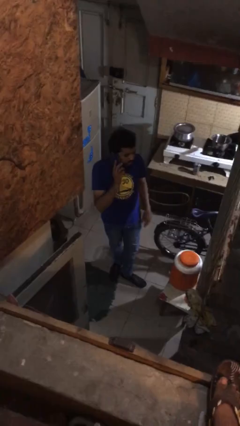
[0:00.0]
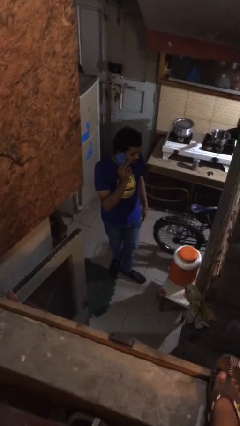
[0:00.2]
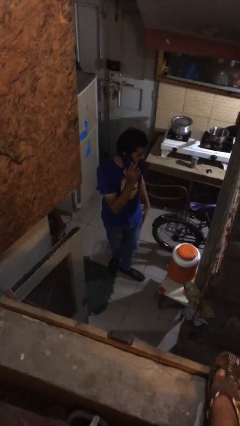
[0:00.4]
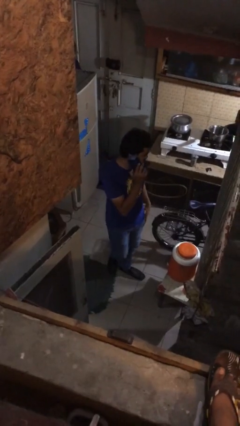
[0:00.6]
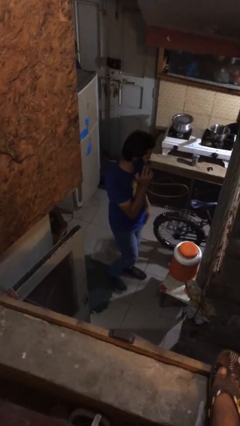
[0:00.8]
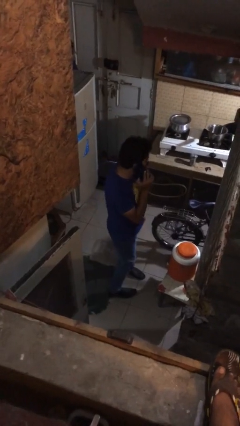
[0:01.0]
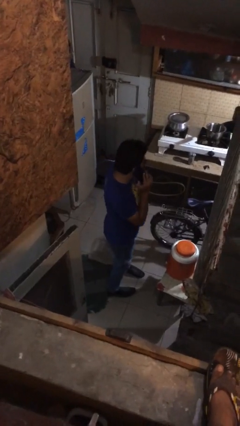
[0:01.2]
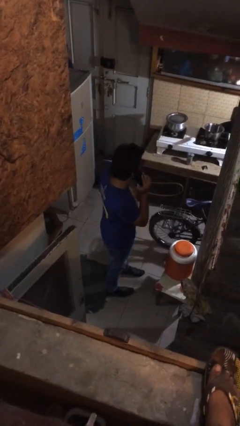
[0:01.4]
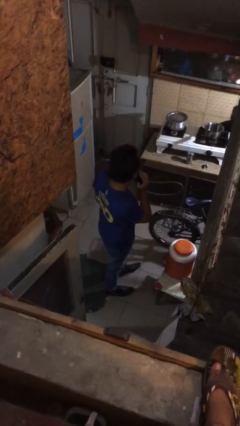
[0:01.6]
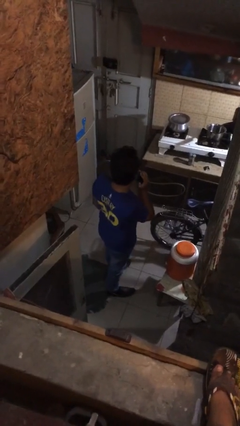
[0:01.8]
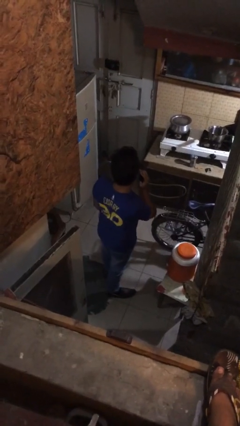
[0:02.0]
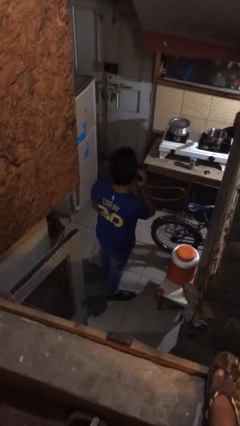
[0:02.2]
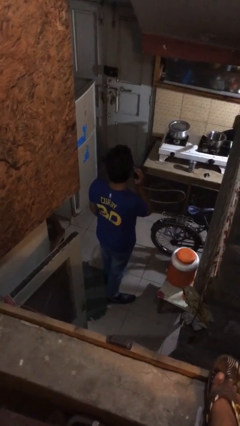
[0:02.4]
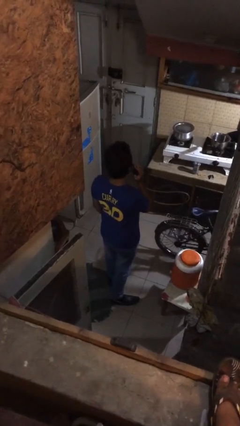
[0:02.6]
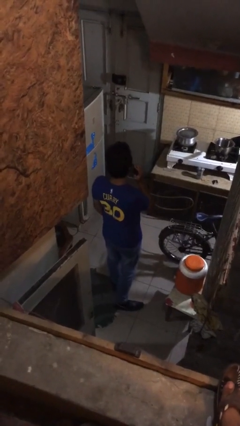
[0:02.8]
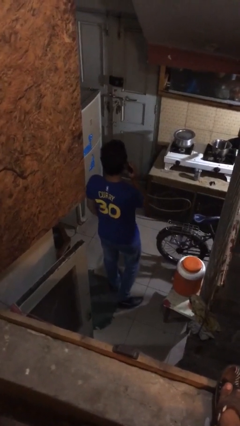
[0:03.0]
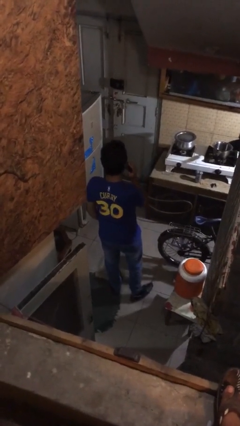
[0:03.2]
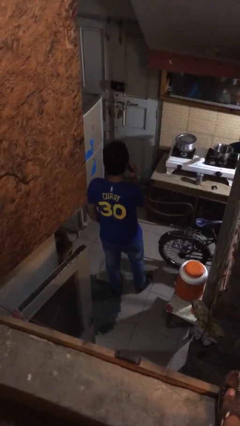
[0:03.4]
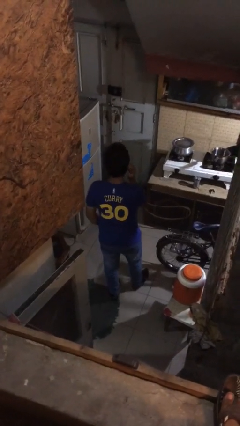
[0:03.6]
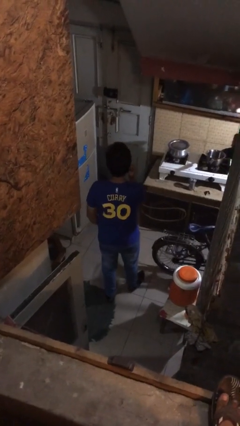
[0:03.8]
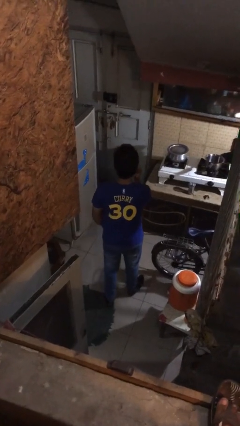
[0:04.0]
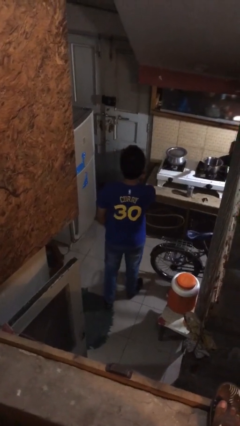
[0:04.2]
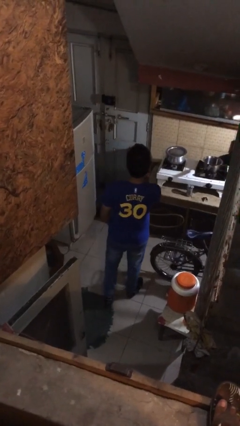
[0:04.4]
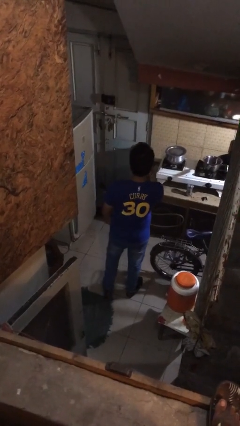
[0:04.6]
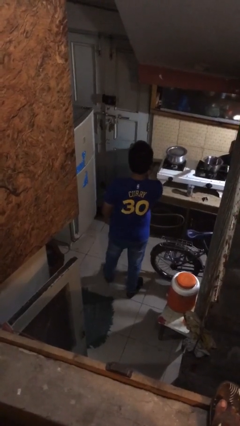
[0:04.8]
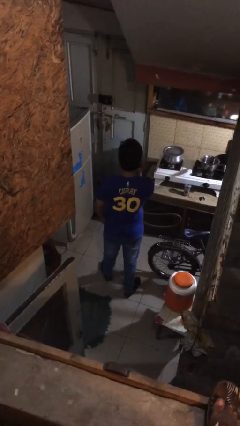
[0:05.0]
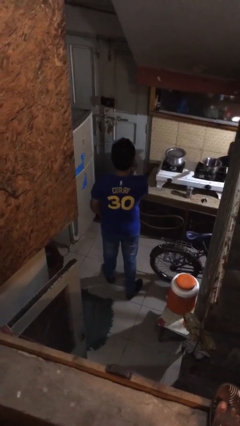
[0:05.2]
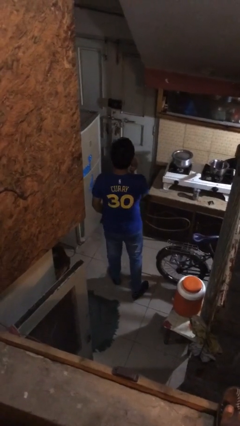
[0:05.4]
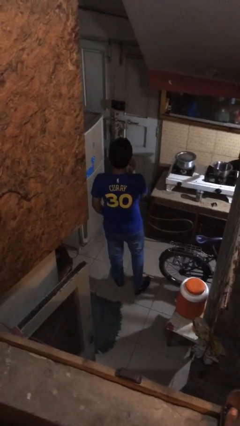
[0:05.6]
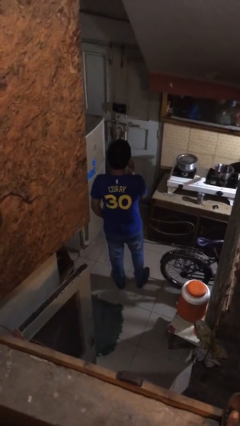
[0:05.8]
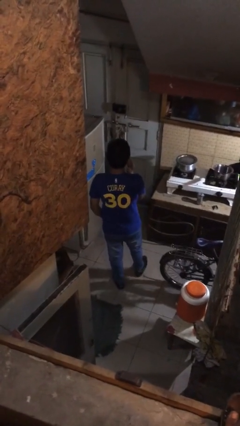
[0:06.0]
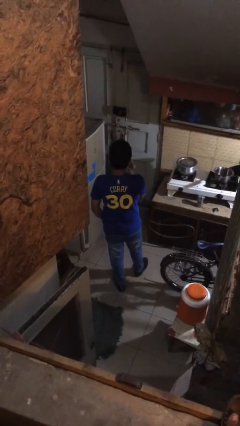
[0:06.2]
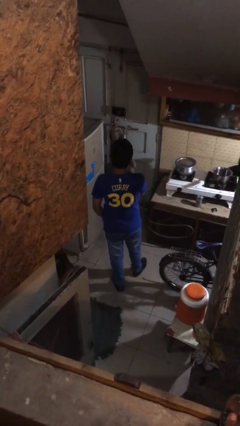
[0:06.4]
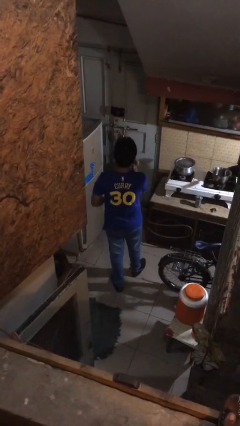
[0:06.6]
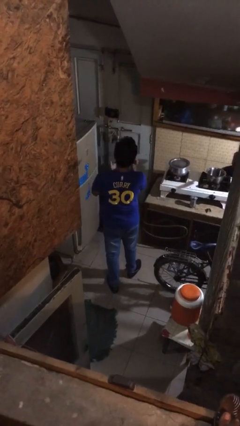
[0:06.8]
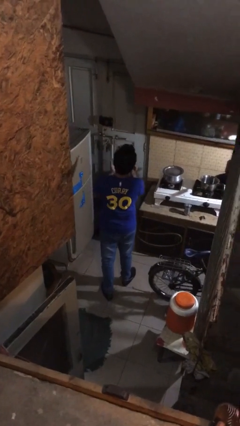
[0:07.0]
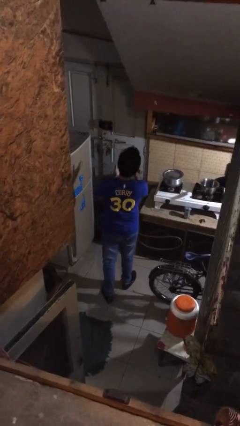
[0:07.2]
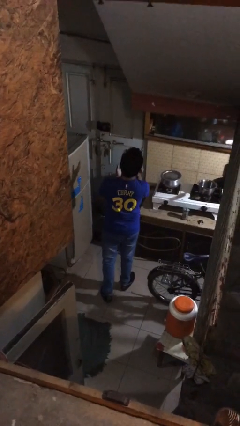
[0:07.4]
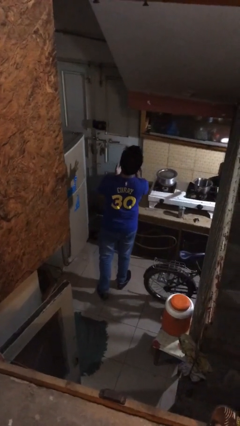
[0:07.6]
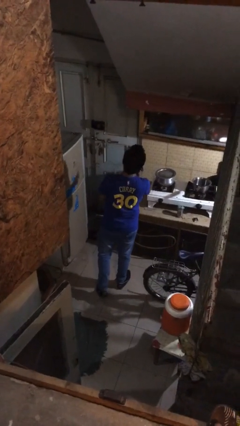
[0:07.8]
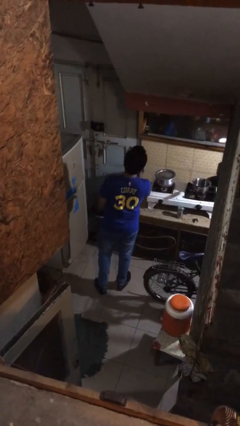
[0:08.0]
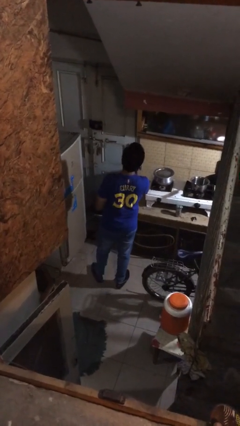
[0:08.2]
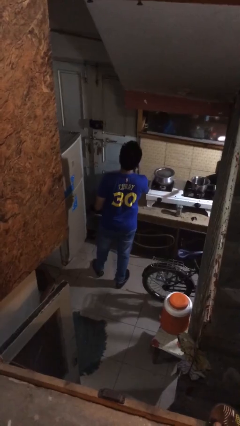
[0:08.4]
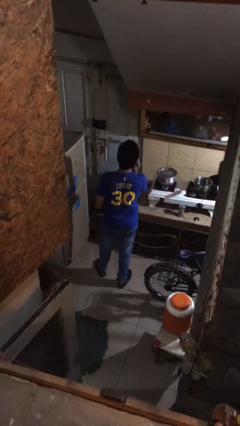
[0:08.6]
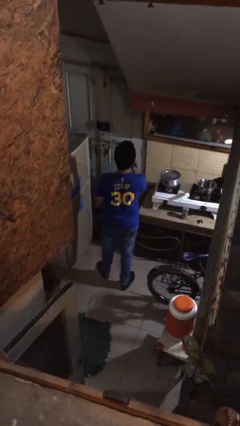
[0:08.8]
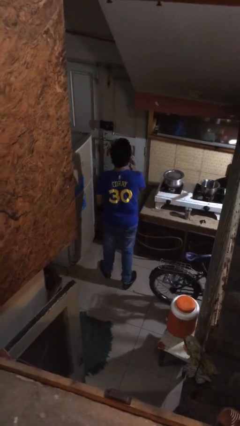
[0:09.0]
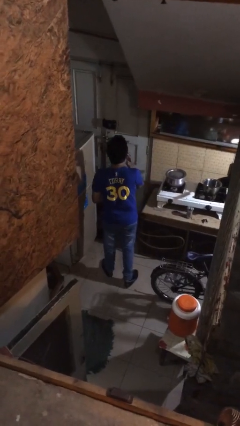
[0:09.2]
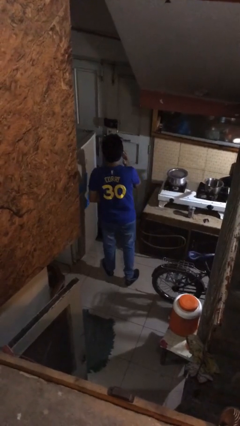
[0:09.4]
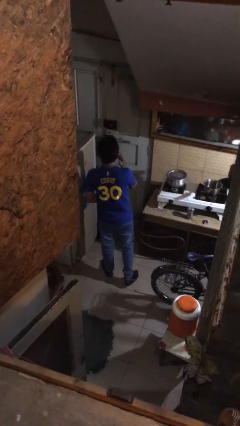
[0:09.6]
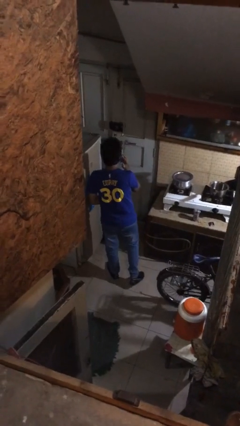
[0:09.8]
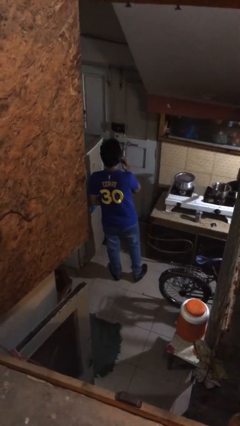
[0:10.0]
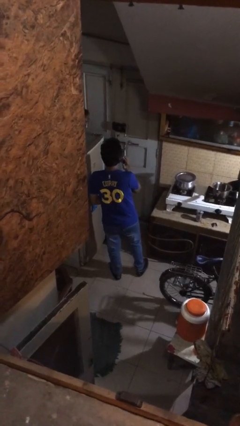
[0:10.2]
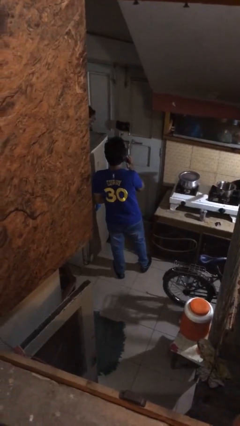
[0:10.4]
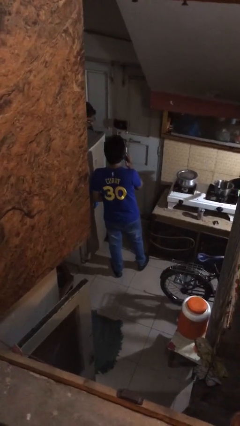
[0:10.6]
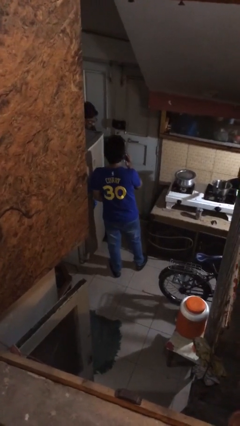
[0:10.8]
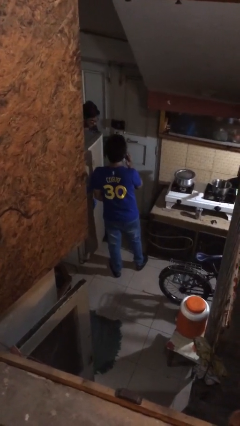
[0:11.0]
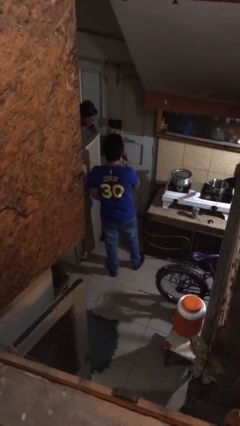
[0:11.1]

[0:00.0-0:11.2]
person talks on phone

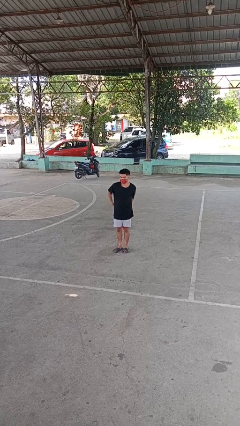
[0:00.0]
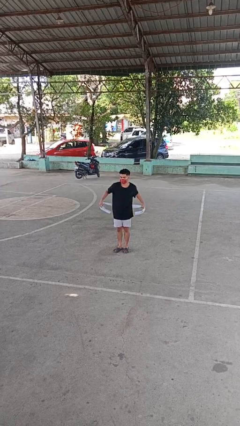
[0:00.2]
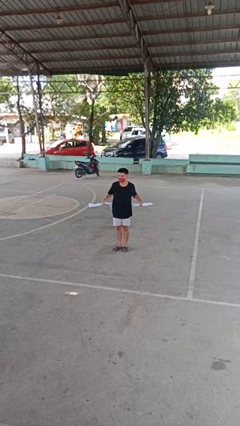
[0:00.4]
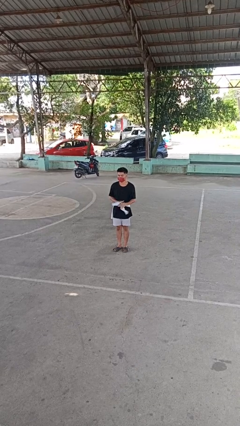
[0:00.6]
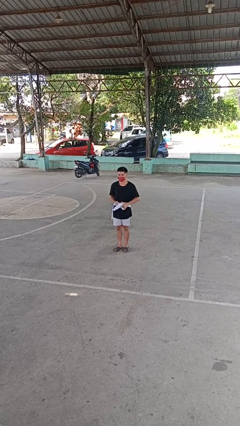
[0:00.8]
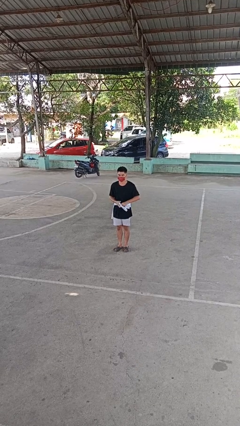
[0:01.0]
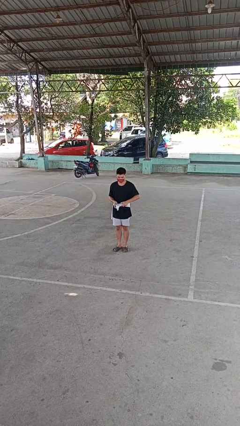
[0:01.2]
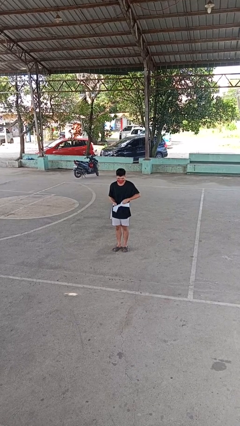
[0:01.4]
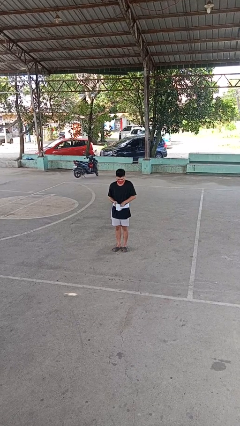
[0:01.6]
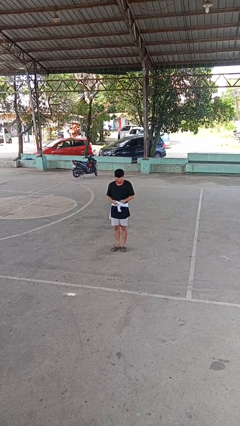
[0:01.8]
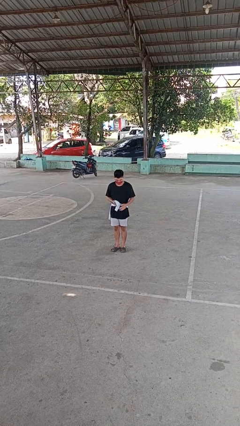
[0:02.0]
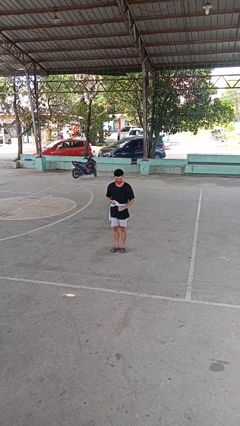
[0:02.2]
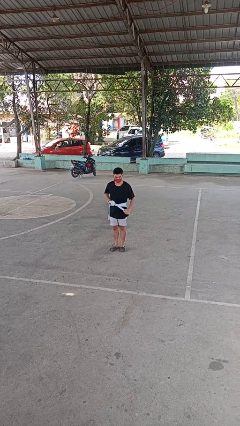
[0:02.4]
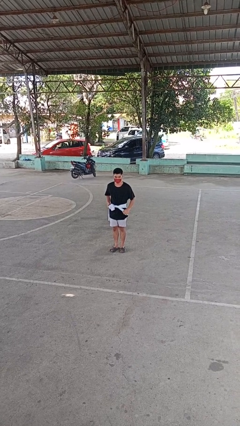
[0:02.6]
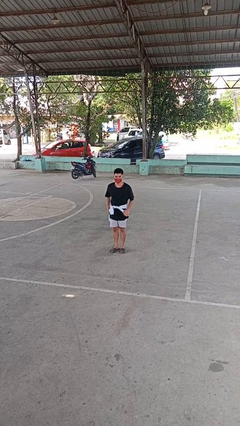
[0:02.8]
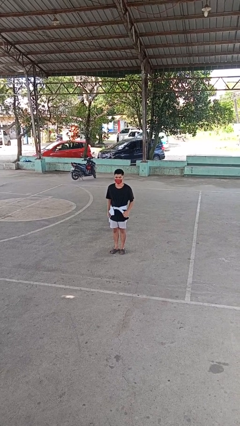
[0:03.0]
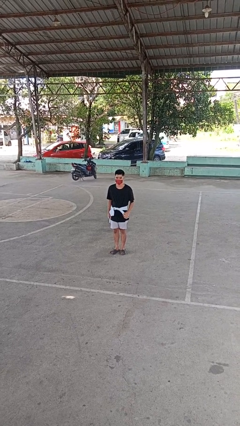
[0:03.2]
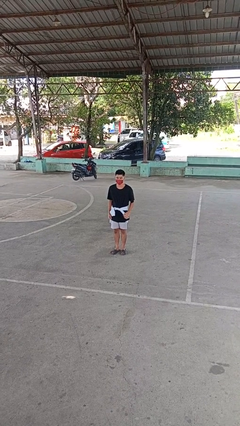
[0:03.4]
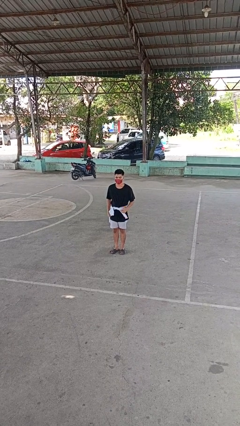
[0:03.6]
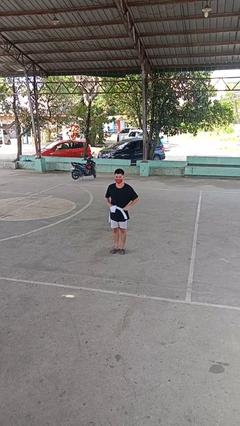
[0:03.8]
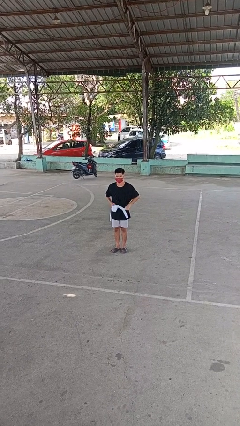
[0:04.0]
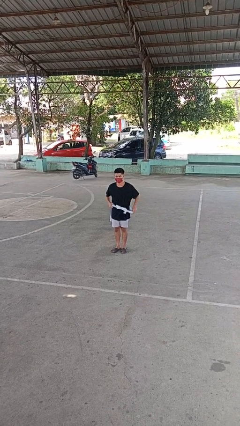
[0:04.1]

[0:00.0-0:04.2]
person ties jacket around waist

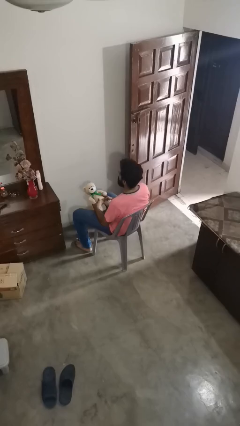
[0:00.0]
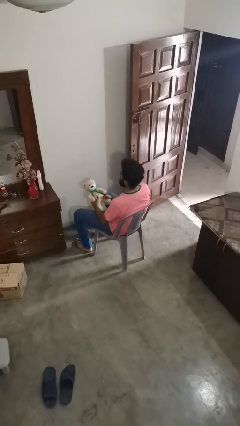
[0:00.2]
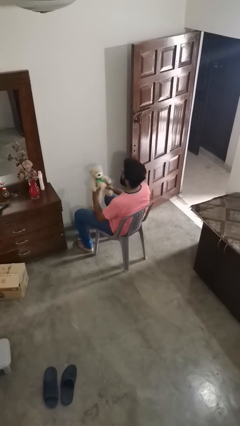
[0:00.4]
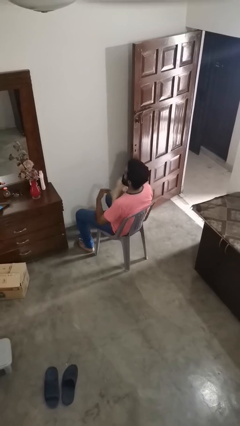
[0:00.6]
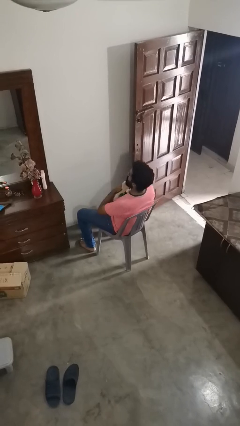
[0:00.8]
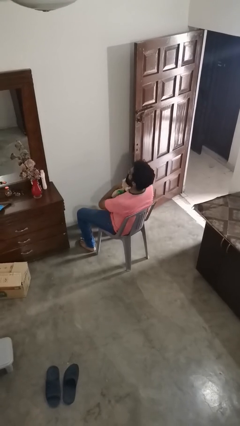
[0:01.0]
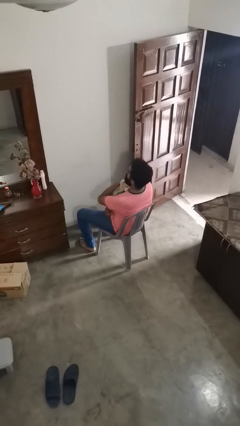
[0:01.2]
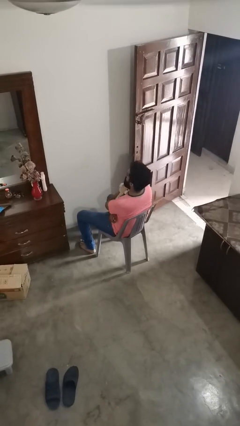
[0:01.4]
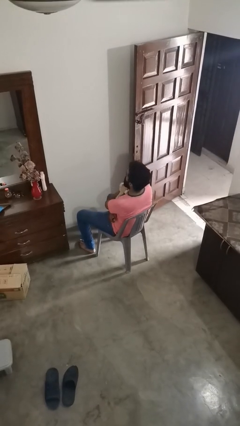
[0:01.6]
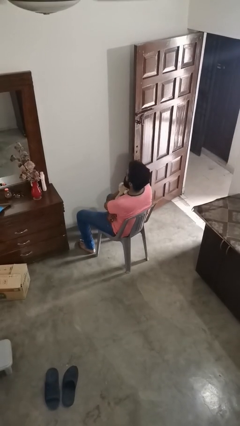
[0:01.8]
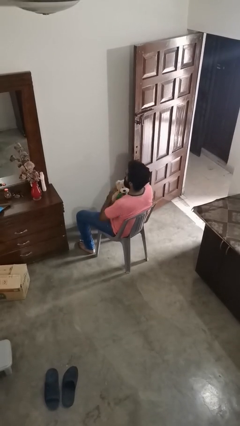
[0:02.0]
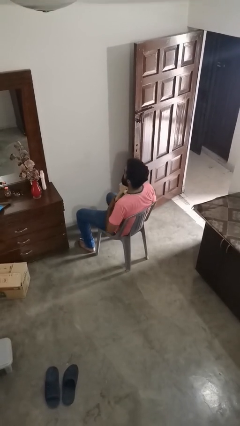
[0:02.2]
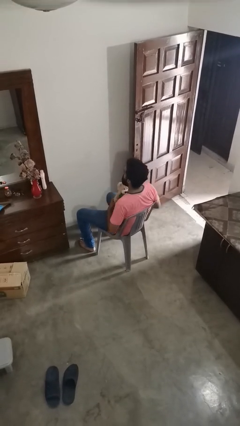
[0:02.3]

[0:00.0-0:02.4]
person hugs stuffed animal

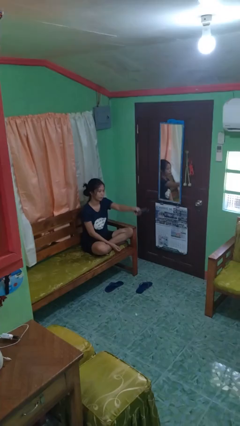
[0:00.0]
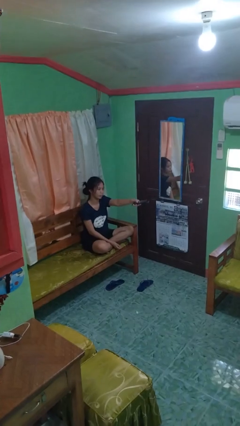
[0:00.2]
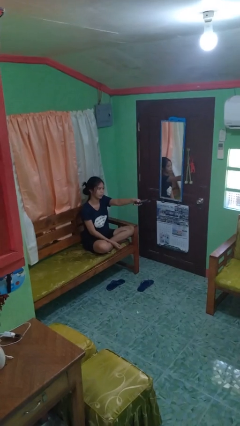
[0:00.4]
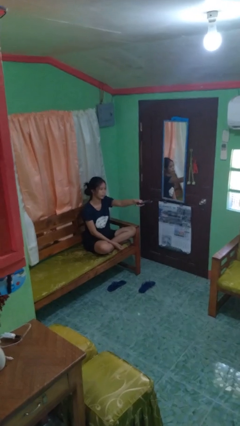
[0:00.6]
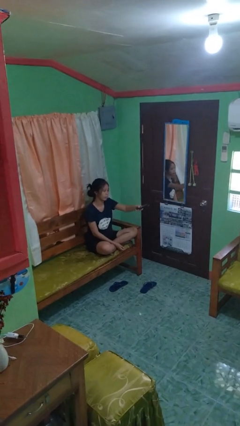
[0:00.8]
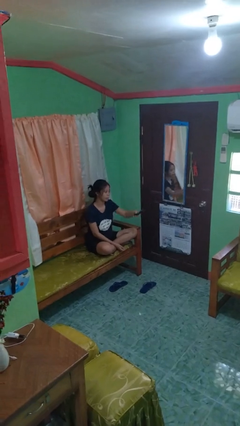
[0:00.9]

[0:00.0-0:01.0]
person uses television remote
